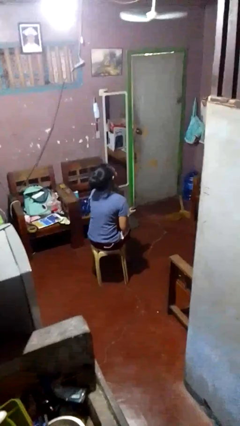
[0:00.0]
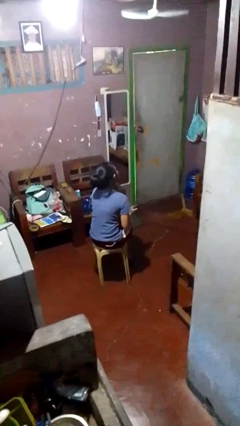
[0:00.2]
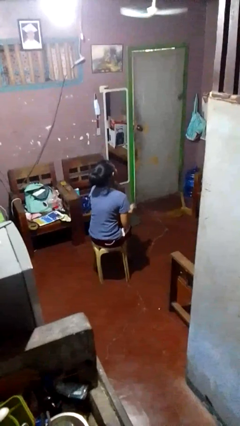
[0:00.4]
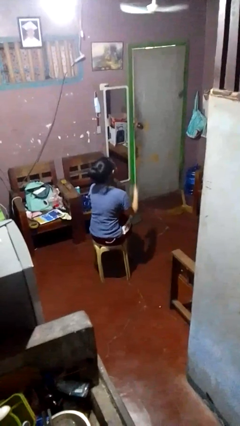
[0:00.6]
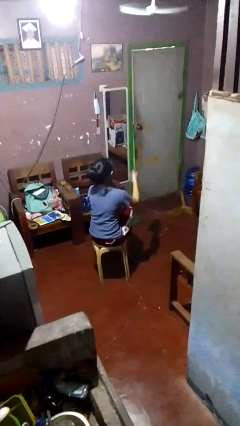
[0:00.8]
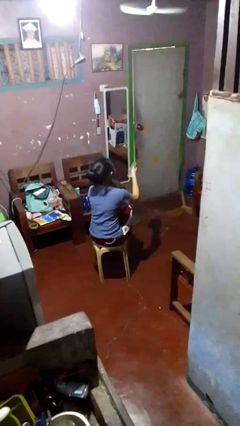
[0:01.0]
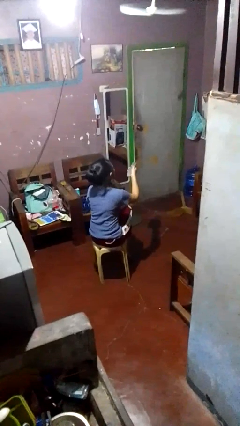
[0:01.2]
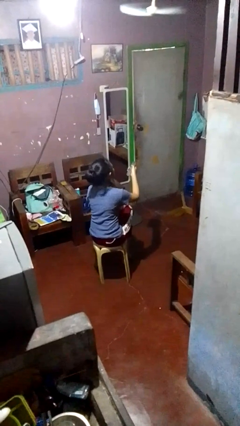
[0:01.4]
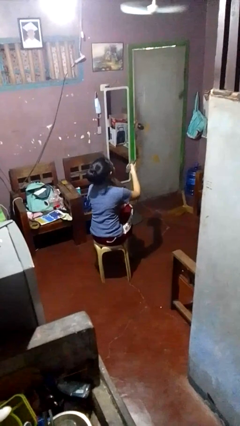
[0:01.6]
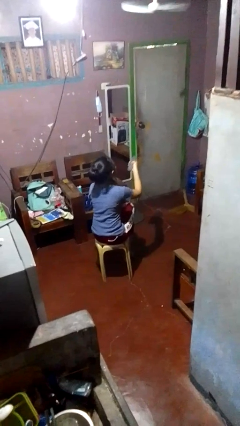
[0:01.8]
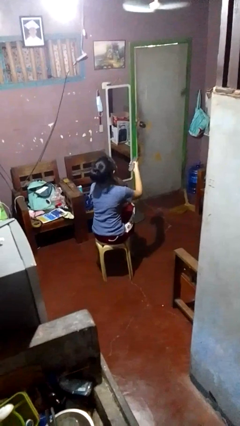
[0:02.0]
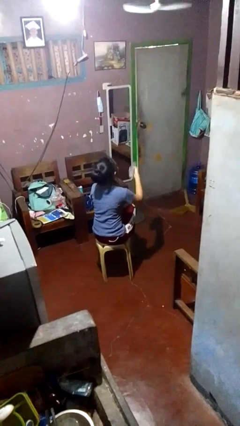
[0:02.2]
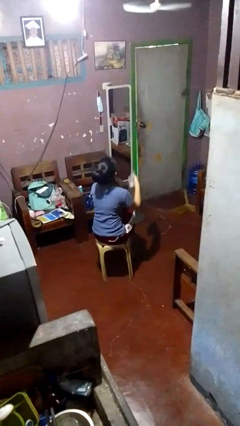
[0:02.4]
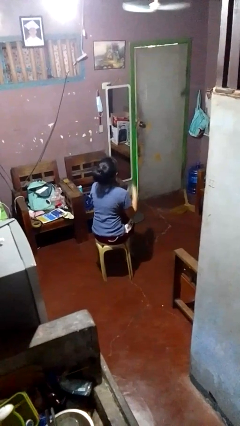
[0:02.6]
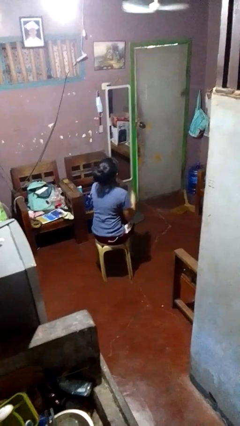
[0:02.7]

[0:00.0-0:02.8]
person uses television remote

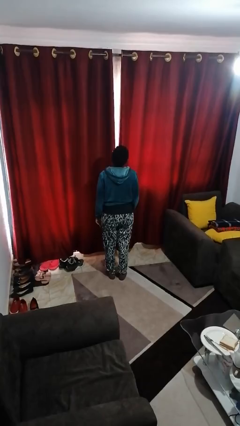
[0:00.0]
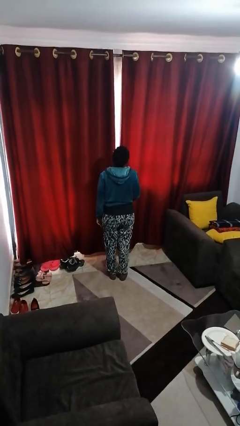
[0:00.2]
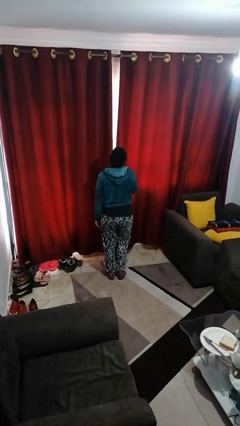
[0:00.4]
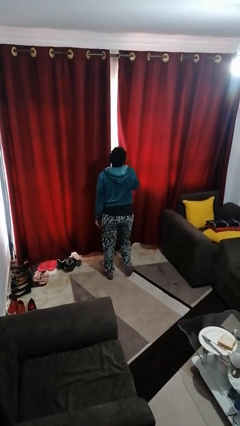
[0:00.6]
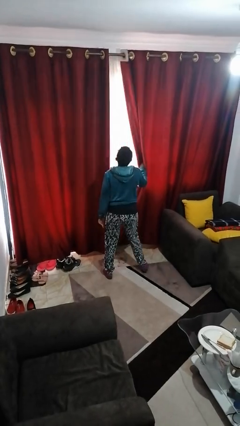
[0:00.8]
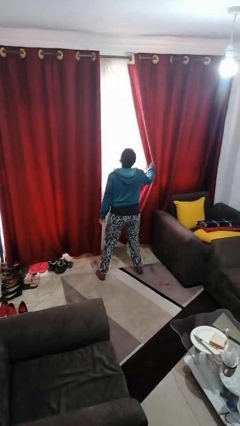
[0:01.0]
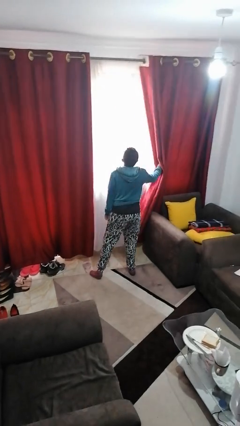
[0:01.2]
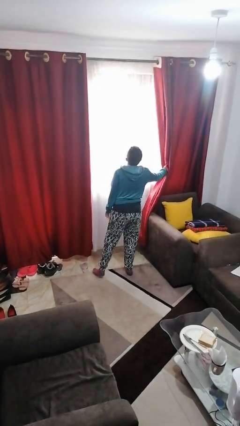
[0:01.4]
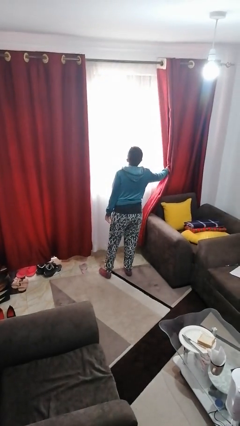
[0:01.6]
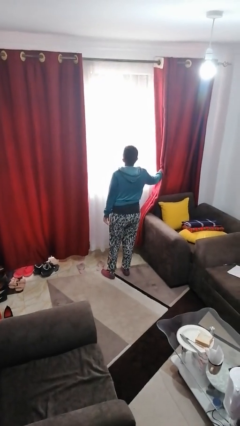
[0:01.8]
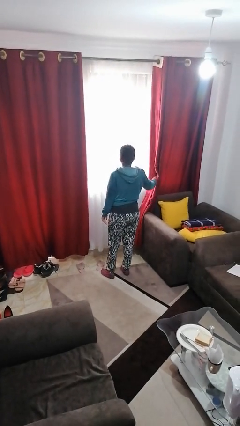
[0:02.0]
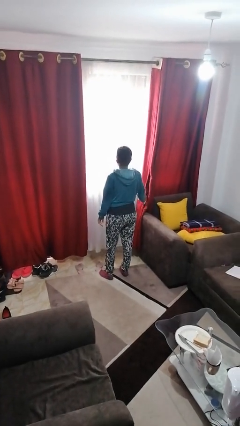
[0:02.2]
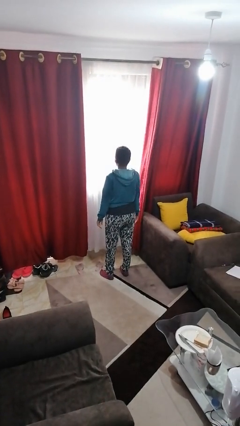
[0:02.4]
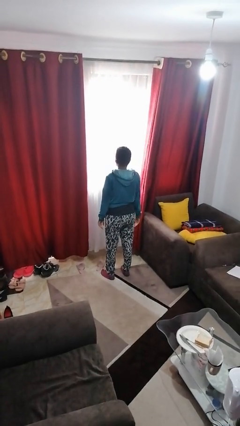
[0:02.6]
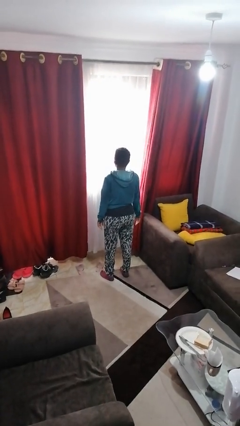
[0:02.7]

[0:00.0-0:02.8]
person opens curtains

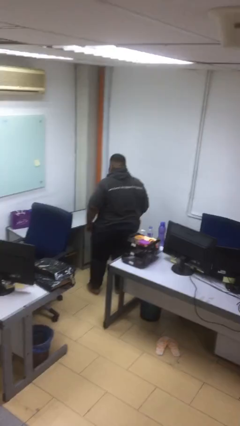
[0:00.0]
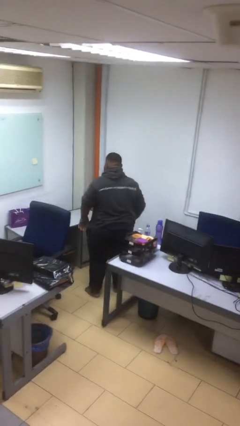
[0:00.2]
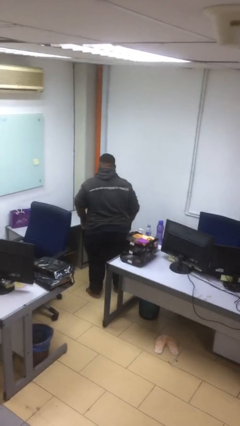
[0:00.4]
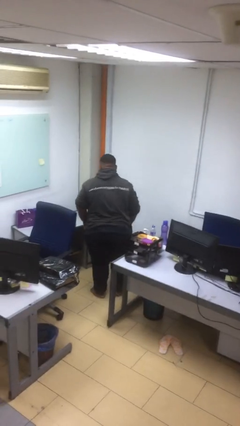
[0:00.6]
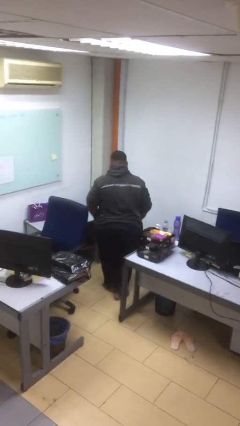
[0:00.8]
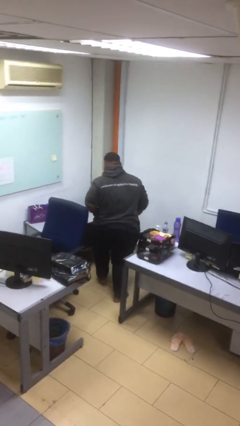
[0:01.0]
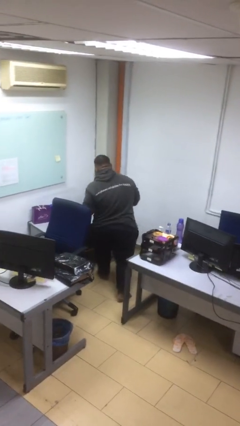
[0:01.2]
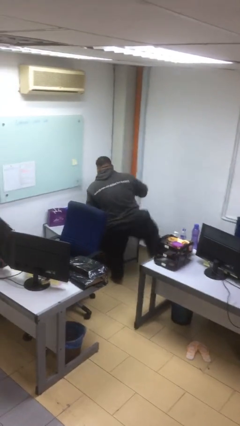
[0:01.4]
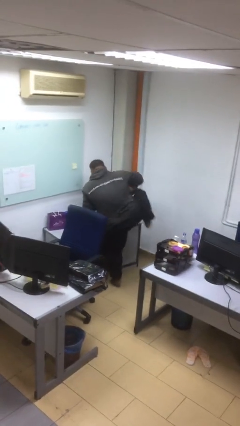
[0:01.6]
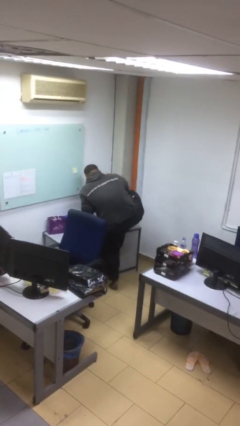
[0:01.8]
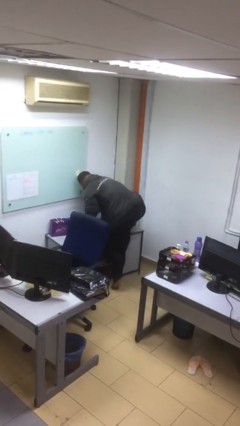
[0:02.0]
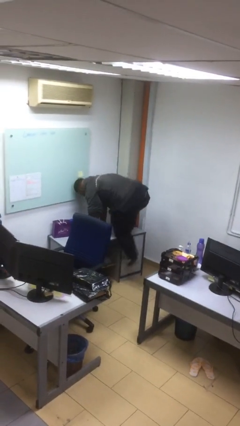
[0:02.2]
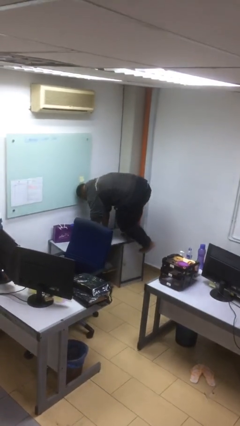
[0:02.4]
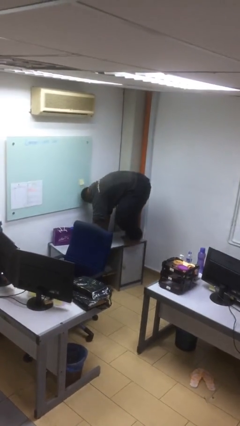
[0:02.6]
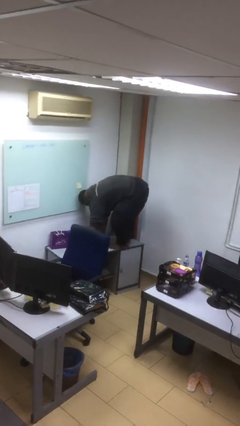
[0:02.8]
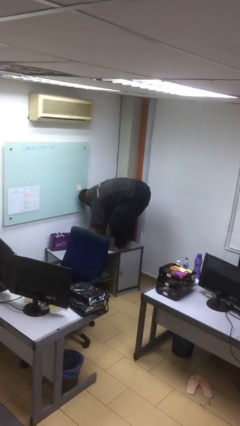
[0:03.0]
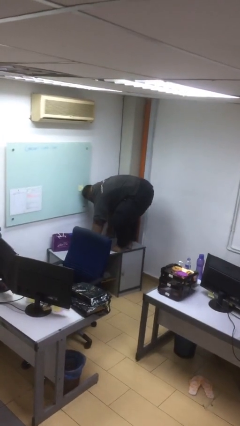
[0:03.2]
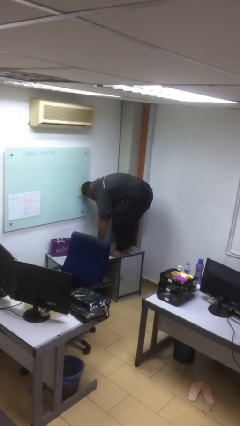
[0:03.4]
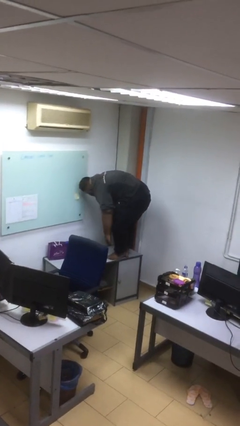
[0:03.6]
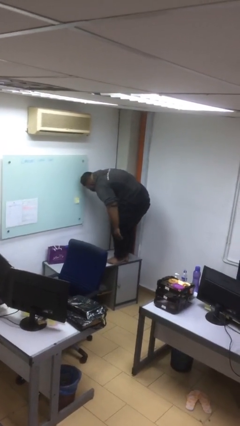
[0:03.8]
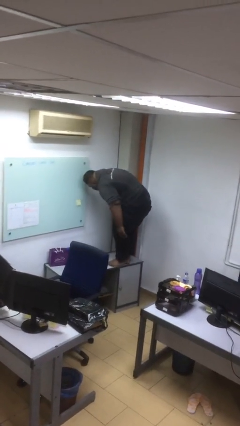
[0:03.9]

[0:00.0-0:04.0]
person climbs on table

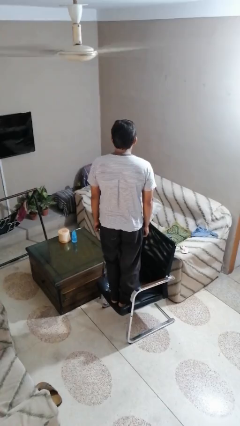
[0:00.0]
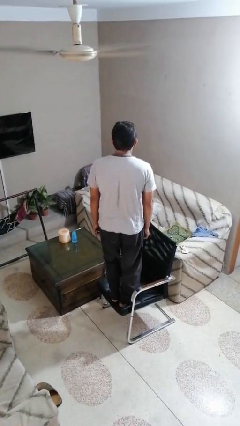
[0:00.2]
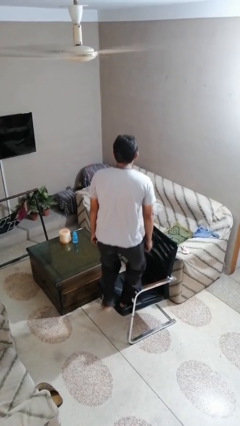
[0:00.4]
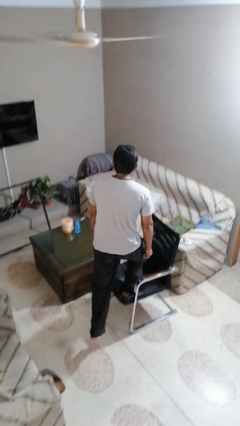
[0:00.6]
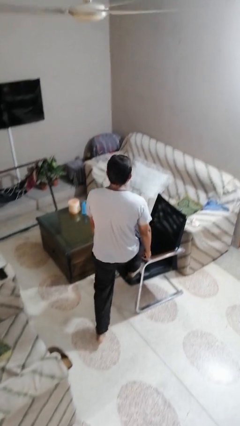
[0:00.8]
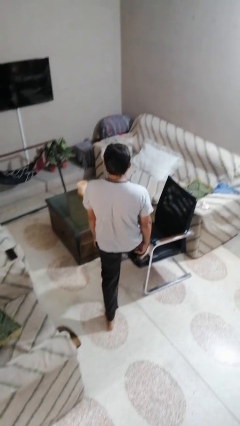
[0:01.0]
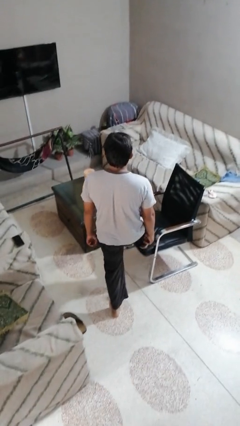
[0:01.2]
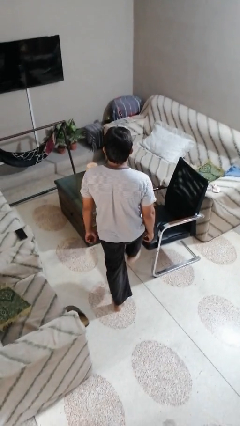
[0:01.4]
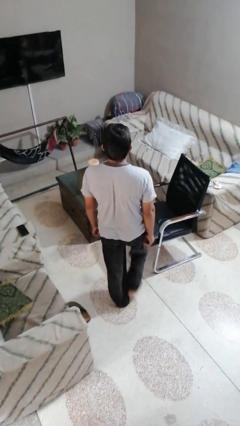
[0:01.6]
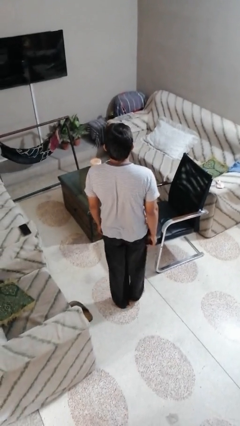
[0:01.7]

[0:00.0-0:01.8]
person climbs off chair

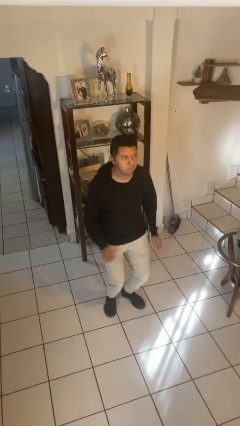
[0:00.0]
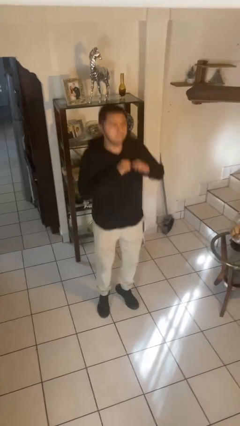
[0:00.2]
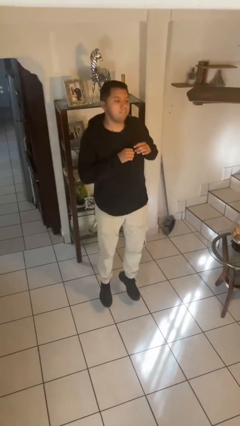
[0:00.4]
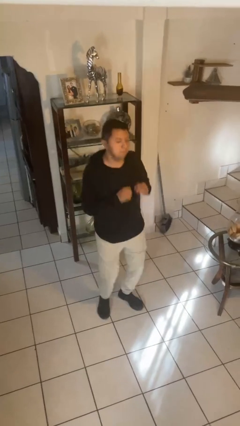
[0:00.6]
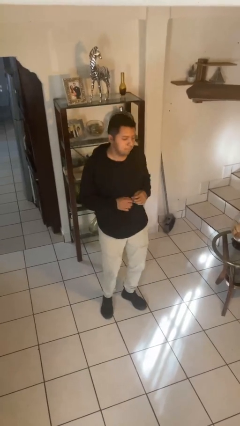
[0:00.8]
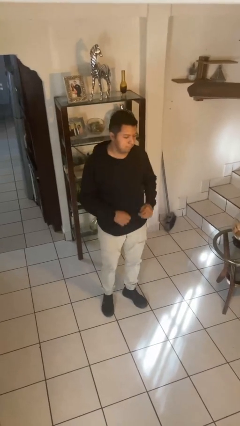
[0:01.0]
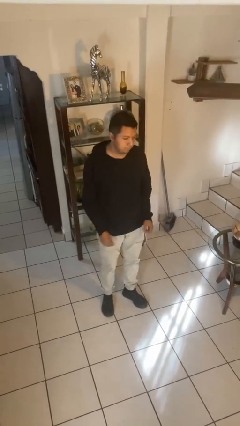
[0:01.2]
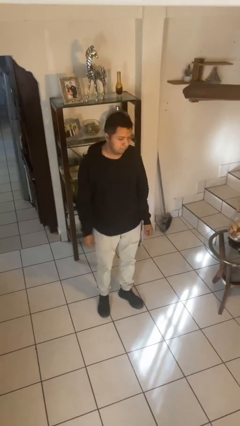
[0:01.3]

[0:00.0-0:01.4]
person jumps

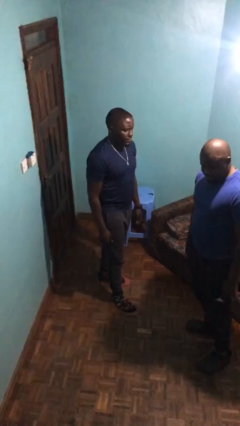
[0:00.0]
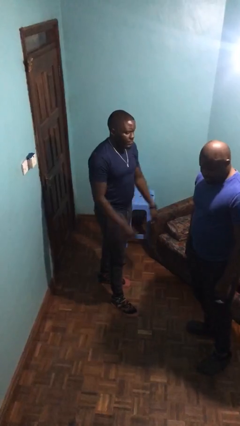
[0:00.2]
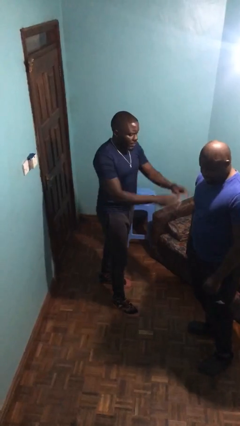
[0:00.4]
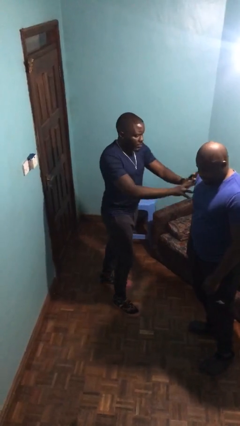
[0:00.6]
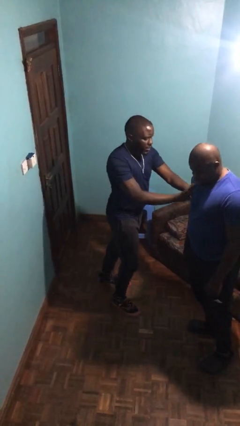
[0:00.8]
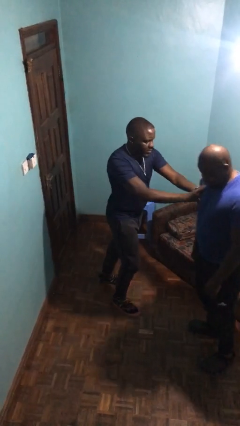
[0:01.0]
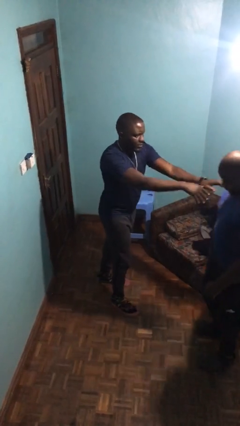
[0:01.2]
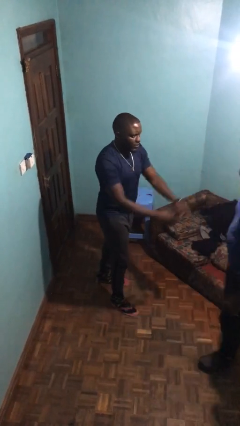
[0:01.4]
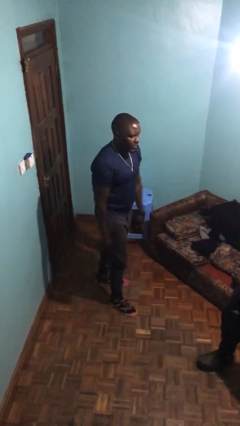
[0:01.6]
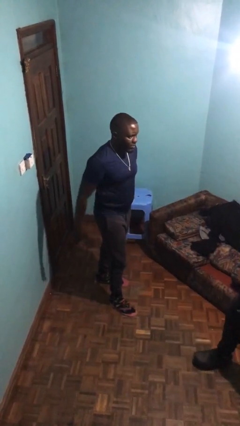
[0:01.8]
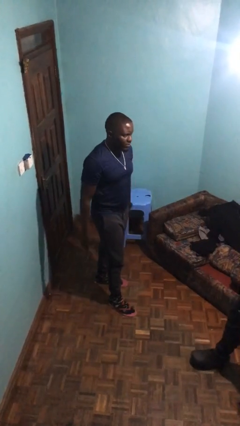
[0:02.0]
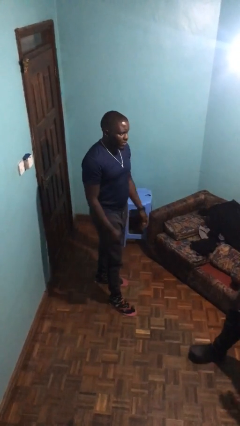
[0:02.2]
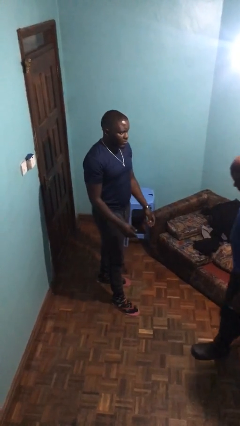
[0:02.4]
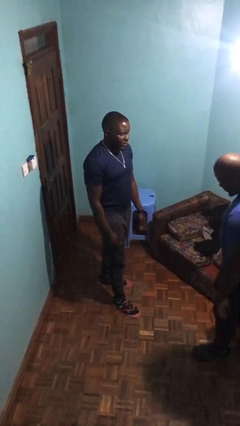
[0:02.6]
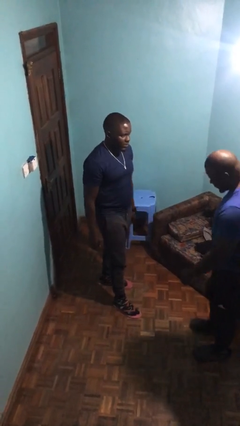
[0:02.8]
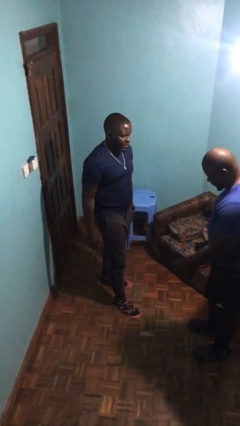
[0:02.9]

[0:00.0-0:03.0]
person shoves person

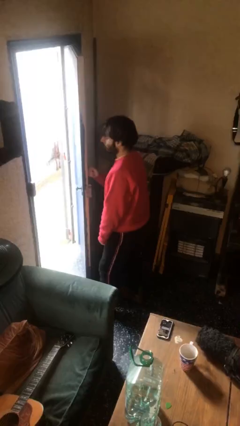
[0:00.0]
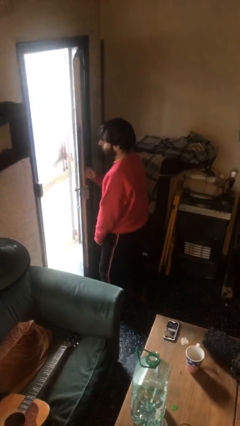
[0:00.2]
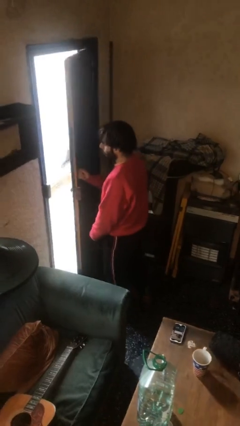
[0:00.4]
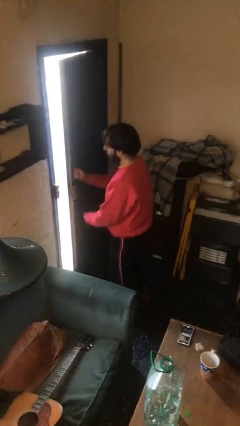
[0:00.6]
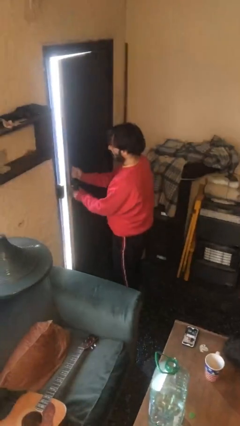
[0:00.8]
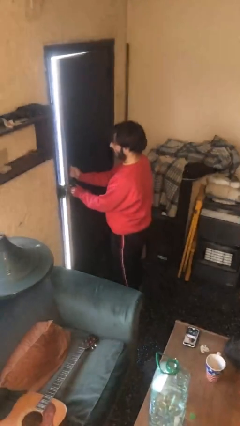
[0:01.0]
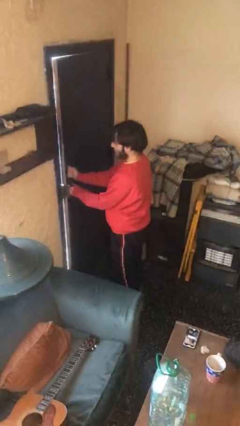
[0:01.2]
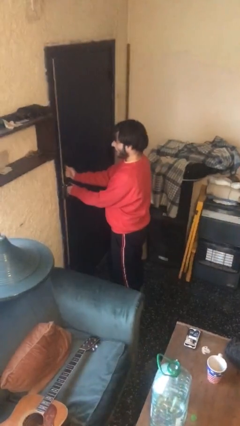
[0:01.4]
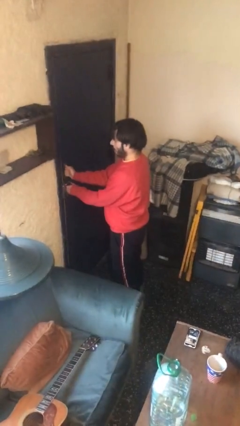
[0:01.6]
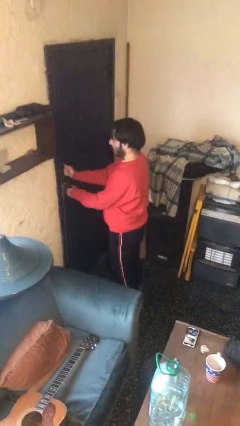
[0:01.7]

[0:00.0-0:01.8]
person closes facility door
